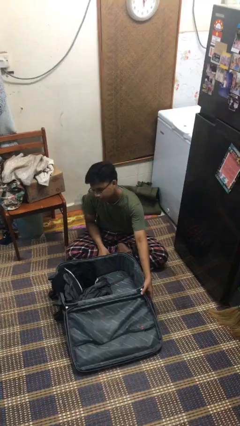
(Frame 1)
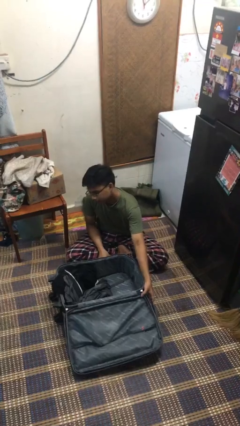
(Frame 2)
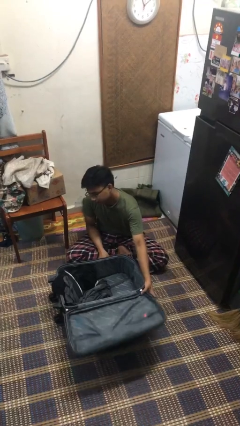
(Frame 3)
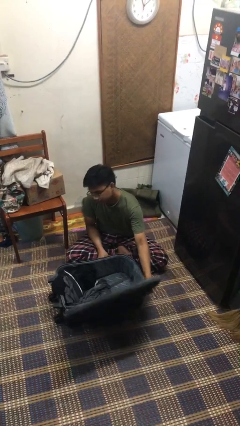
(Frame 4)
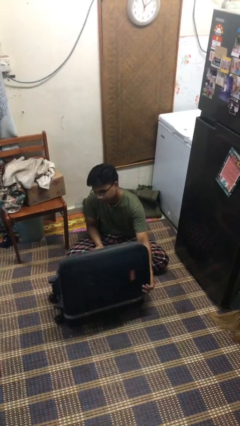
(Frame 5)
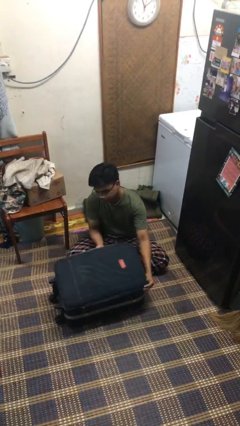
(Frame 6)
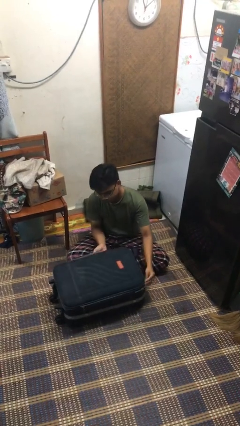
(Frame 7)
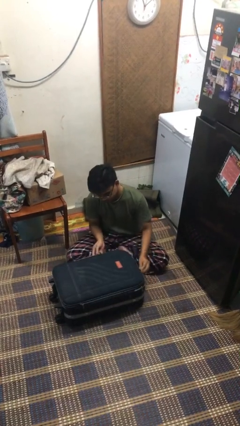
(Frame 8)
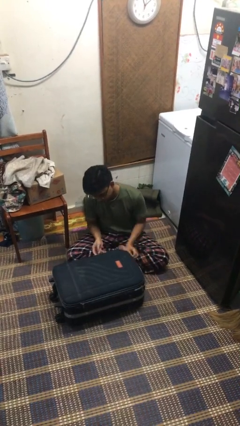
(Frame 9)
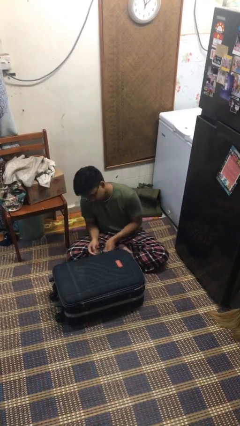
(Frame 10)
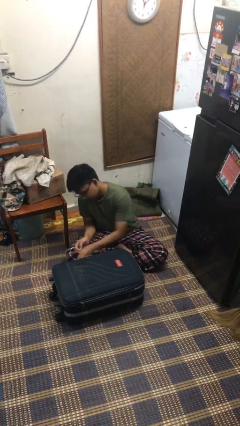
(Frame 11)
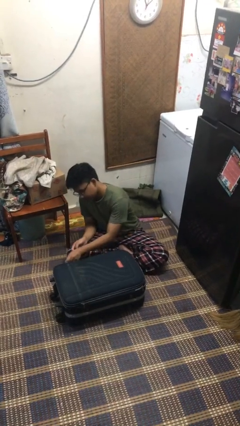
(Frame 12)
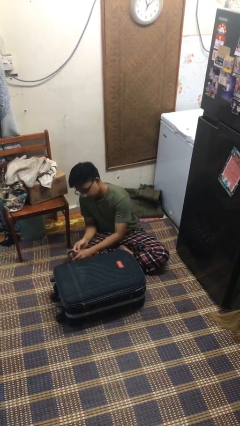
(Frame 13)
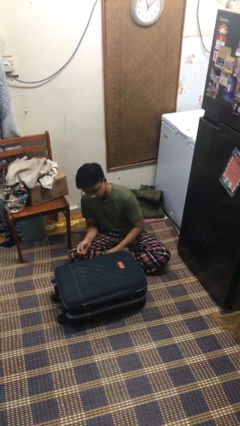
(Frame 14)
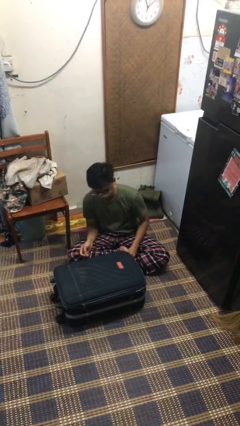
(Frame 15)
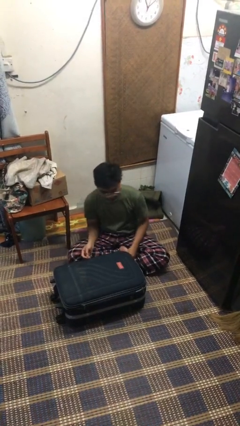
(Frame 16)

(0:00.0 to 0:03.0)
person closes suitcase

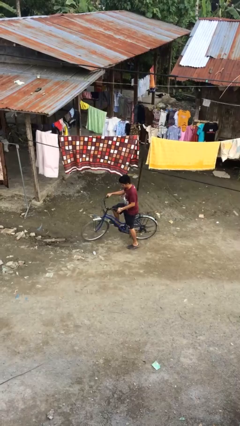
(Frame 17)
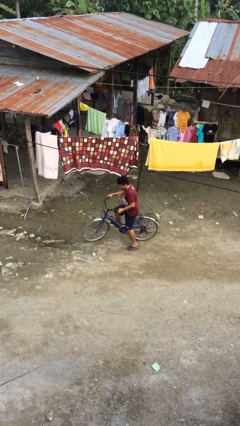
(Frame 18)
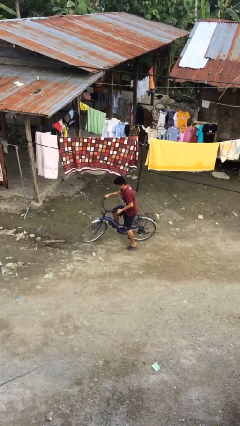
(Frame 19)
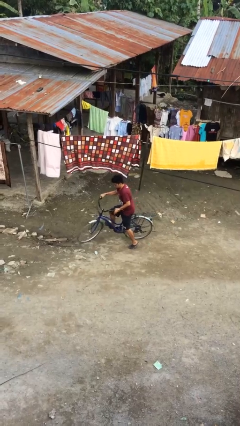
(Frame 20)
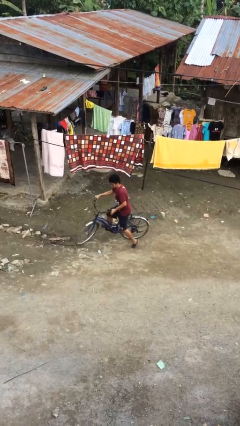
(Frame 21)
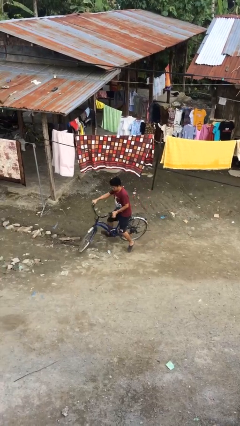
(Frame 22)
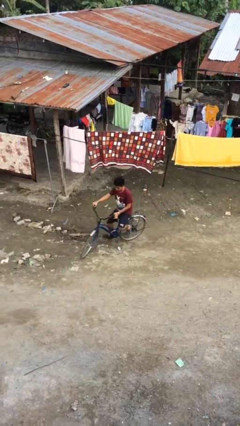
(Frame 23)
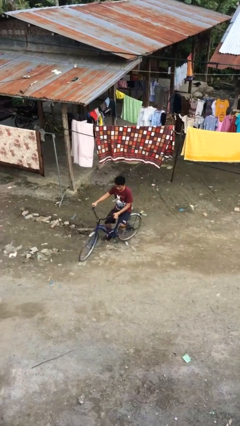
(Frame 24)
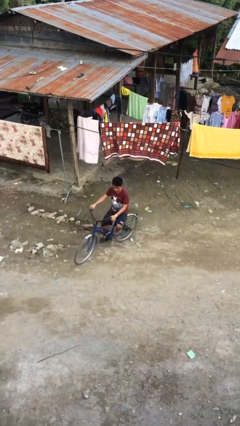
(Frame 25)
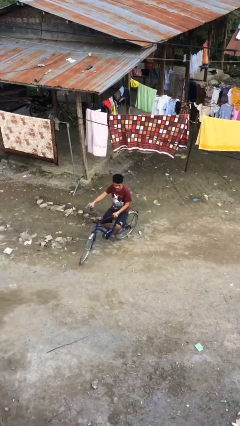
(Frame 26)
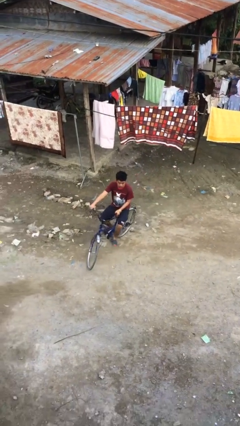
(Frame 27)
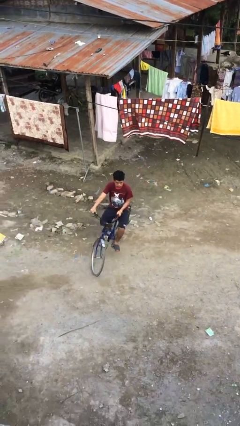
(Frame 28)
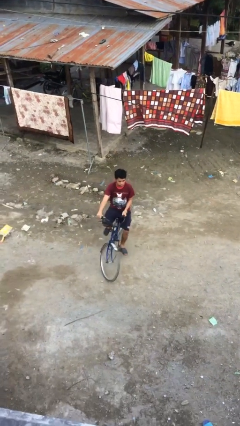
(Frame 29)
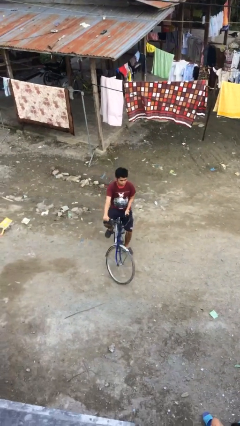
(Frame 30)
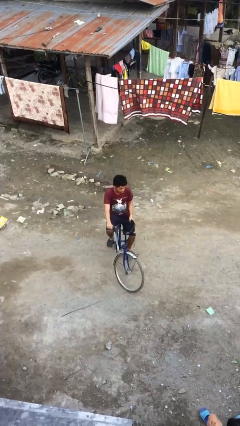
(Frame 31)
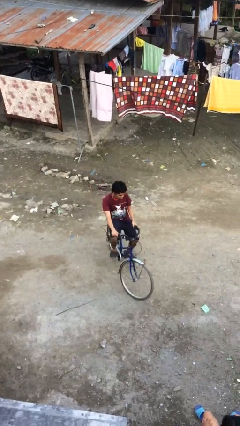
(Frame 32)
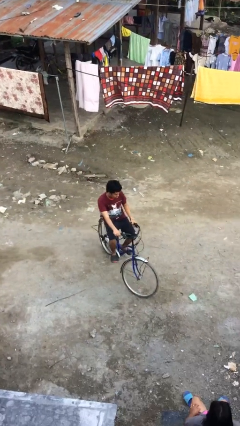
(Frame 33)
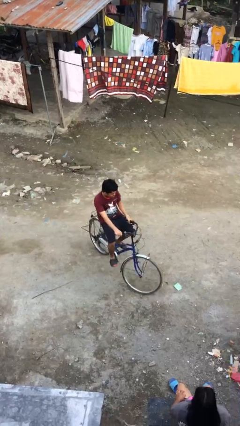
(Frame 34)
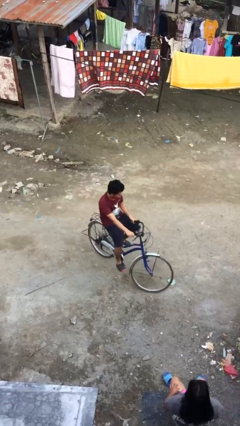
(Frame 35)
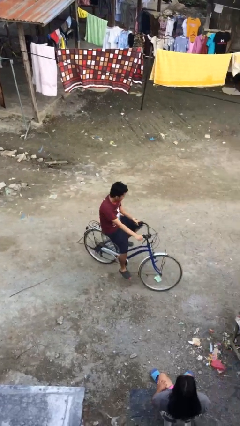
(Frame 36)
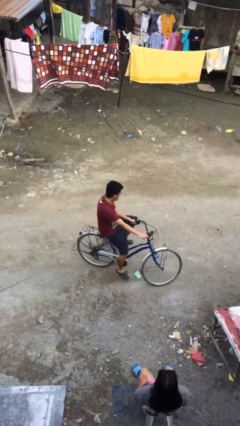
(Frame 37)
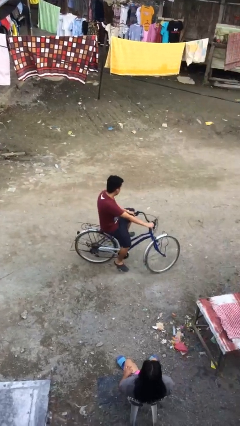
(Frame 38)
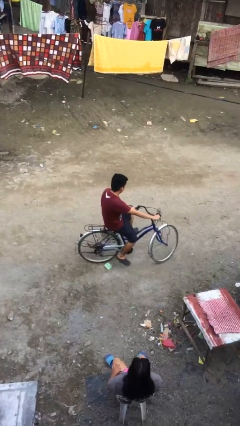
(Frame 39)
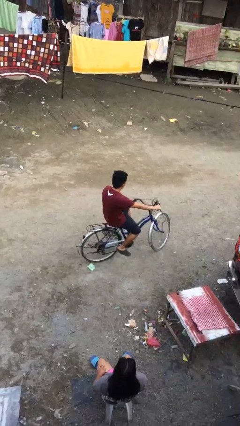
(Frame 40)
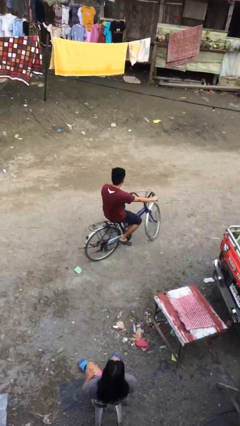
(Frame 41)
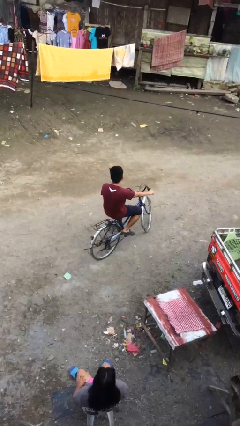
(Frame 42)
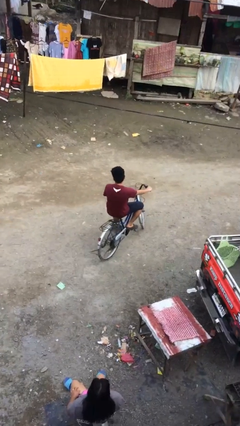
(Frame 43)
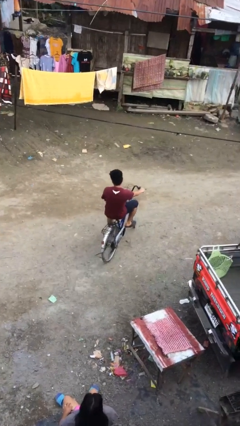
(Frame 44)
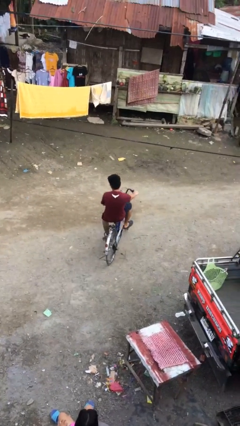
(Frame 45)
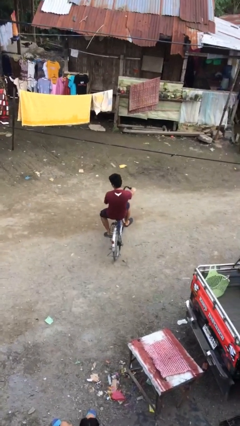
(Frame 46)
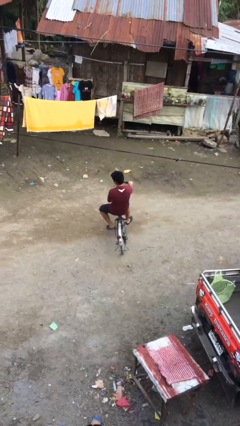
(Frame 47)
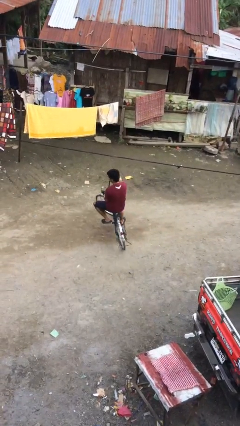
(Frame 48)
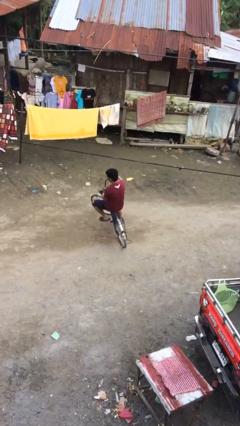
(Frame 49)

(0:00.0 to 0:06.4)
person rides bicycle

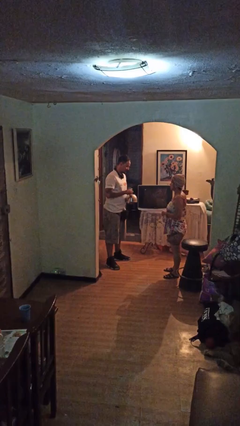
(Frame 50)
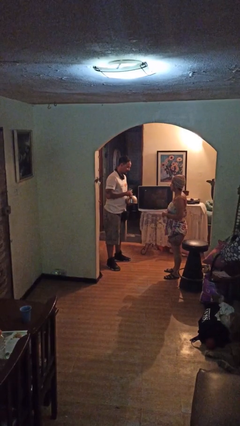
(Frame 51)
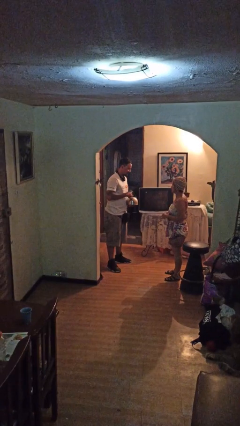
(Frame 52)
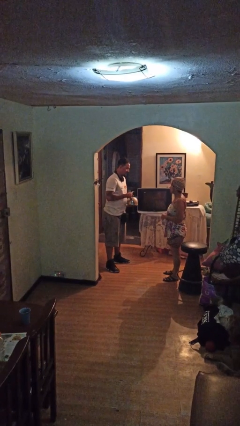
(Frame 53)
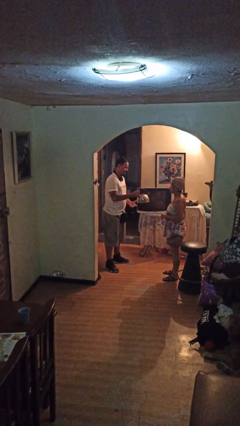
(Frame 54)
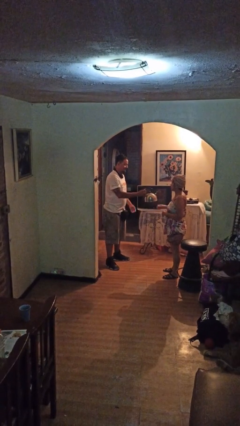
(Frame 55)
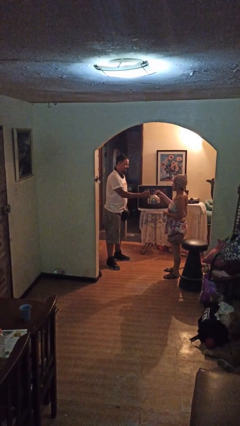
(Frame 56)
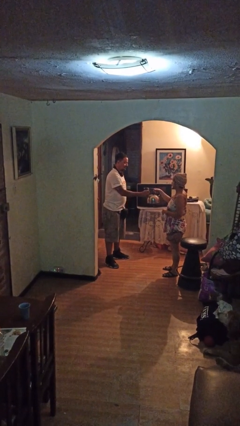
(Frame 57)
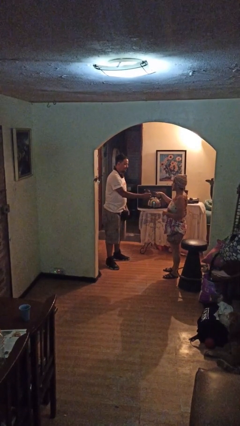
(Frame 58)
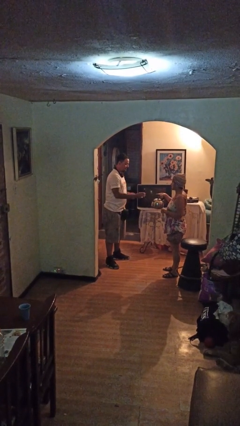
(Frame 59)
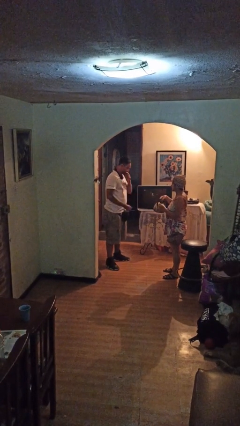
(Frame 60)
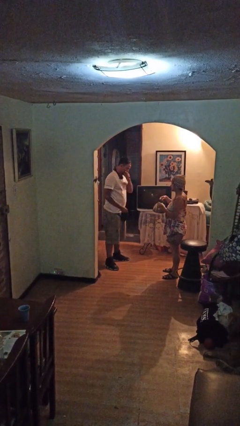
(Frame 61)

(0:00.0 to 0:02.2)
person transfers object to person

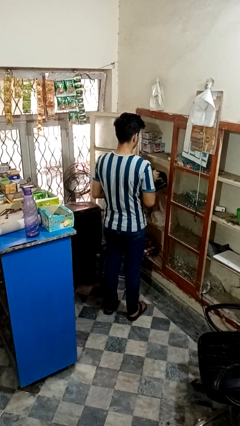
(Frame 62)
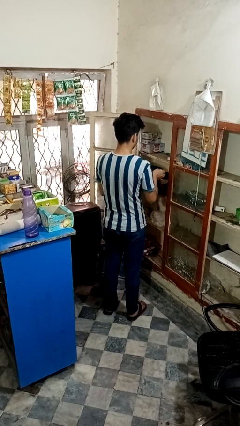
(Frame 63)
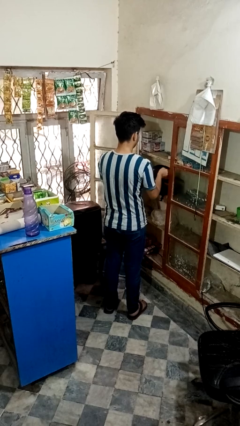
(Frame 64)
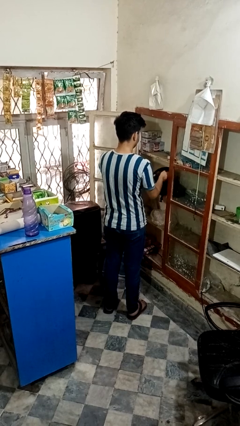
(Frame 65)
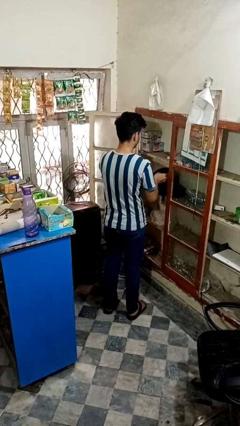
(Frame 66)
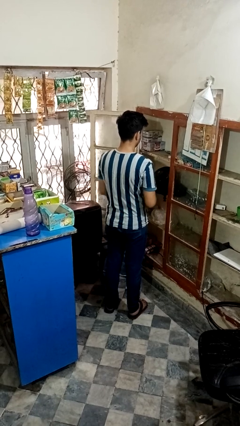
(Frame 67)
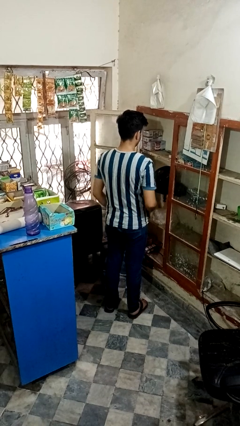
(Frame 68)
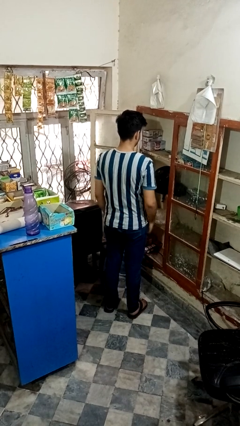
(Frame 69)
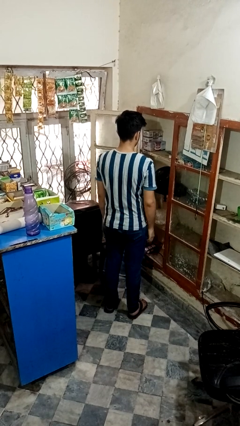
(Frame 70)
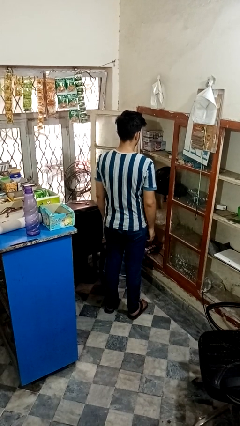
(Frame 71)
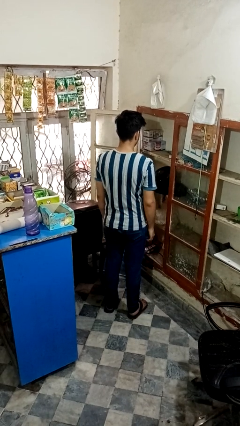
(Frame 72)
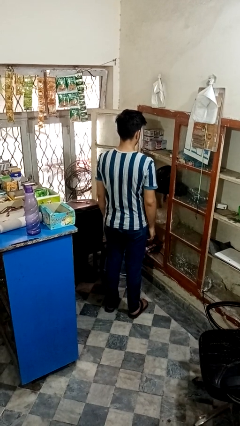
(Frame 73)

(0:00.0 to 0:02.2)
person puts down object on shelf

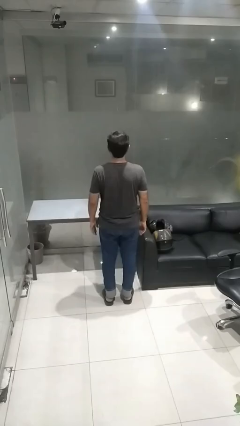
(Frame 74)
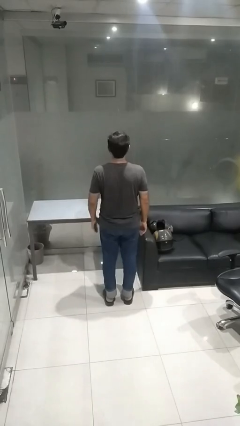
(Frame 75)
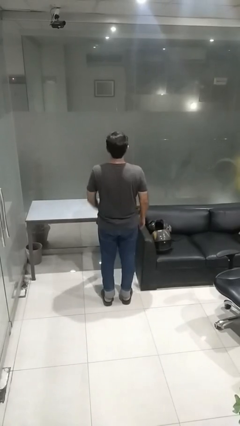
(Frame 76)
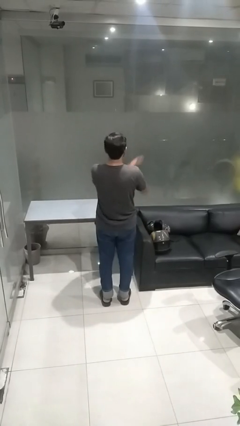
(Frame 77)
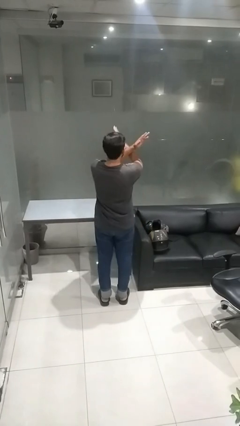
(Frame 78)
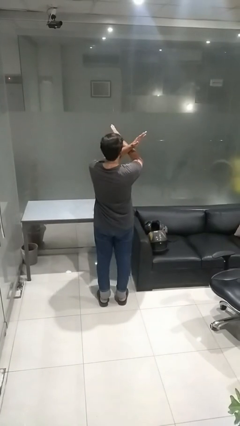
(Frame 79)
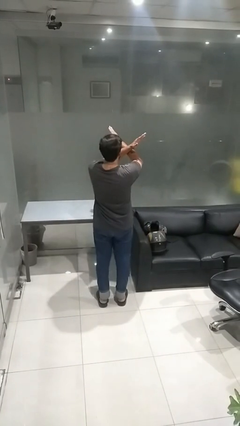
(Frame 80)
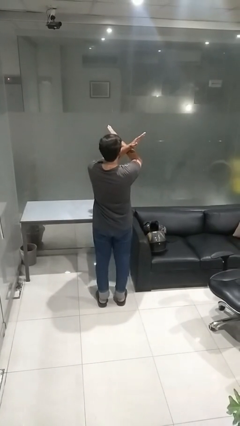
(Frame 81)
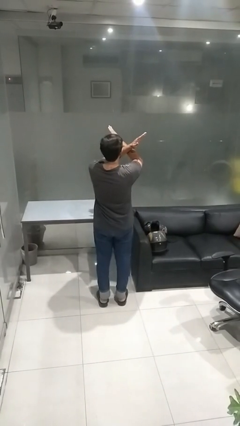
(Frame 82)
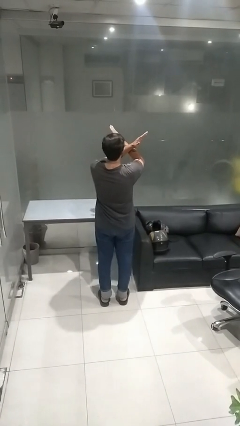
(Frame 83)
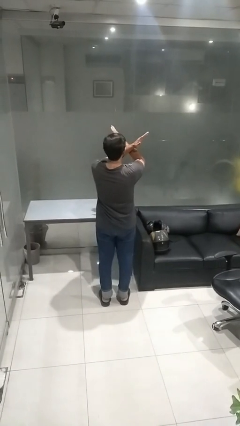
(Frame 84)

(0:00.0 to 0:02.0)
person gestures arms x

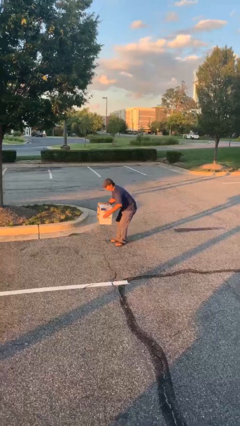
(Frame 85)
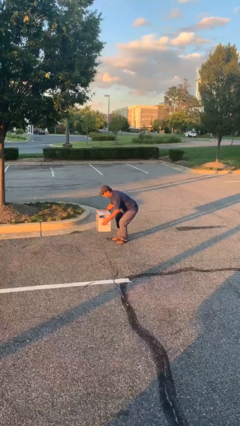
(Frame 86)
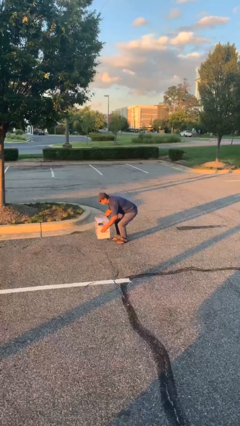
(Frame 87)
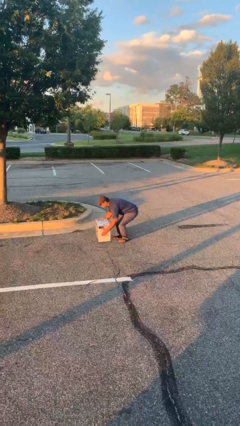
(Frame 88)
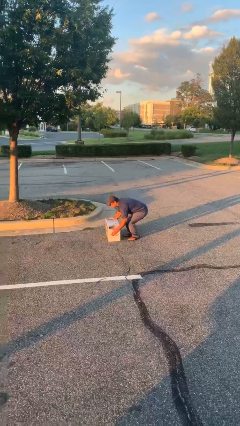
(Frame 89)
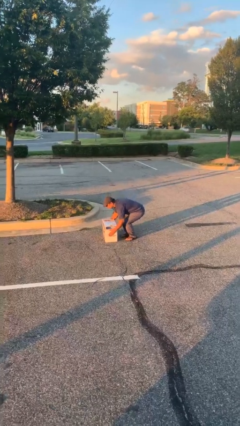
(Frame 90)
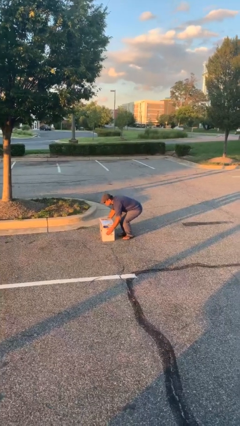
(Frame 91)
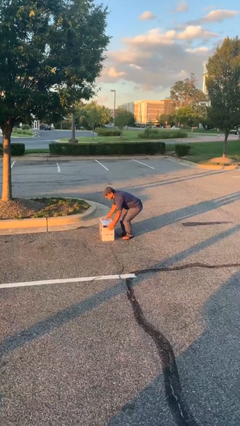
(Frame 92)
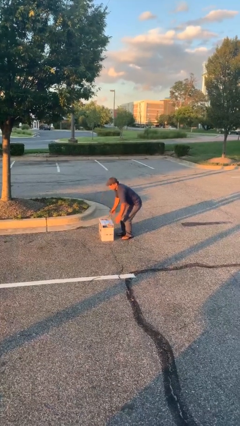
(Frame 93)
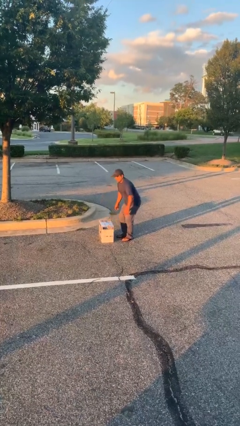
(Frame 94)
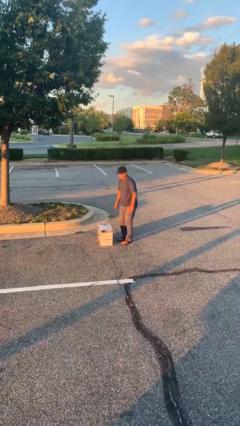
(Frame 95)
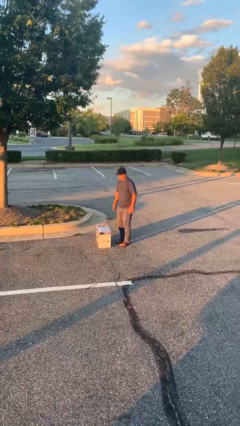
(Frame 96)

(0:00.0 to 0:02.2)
person puts down object on floor
